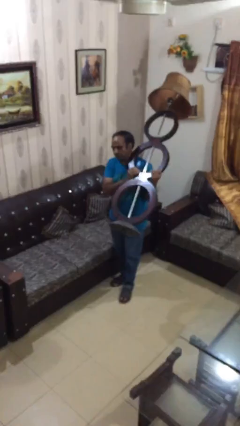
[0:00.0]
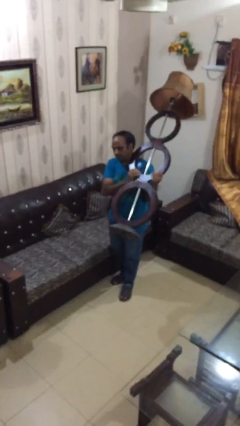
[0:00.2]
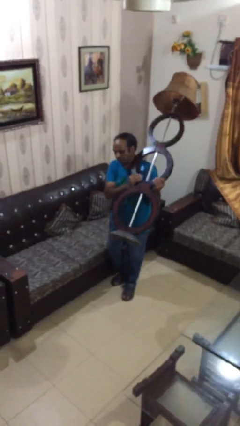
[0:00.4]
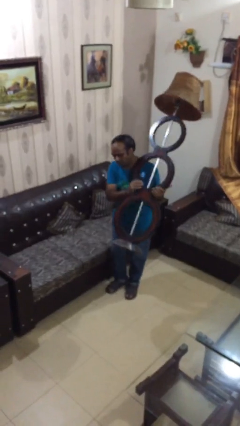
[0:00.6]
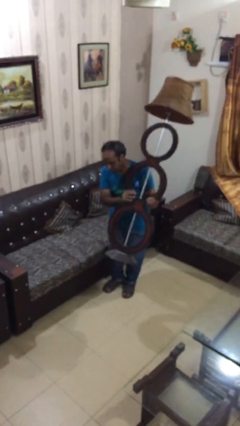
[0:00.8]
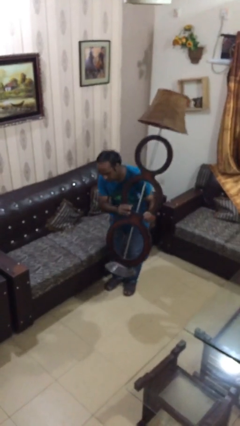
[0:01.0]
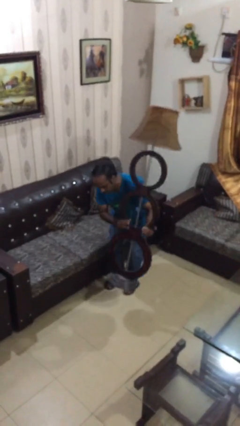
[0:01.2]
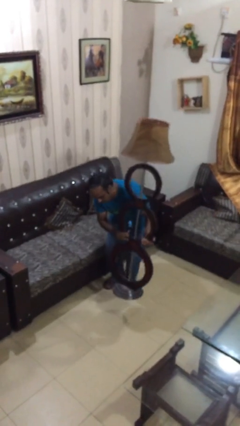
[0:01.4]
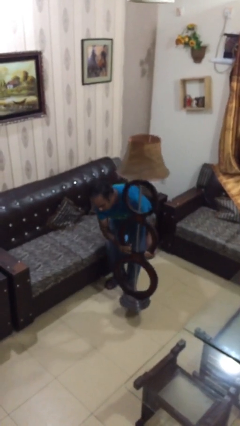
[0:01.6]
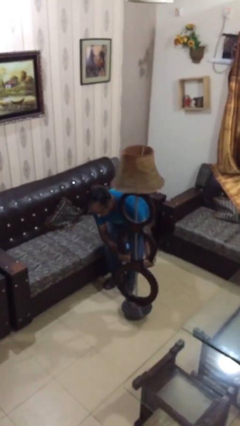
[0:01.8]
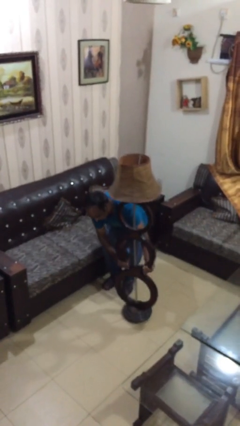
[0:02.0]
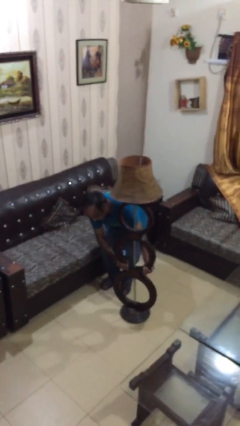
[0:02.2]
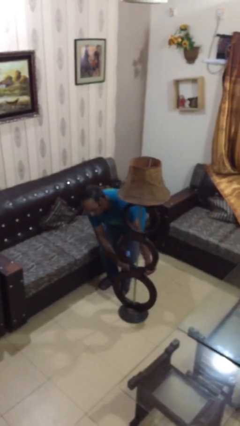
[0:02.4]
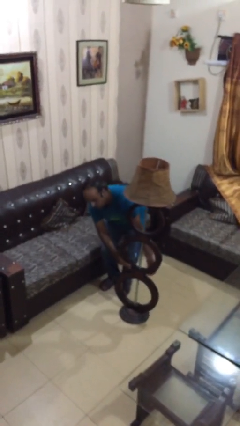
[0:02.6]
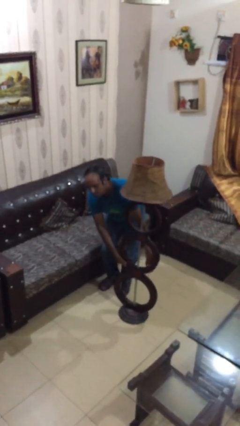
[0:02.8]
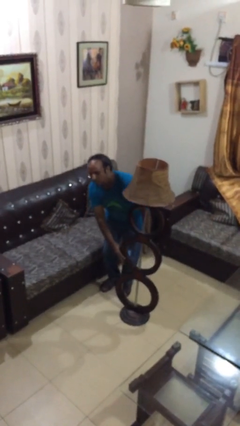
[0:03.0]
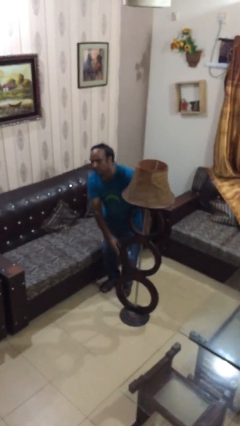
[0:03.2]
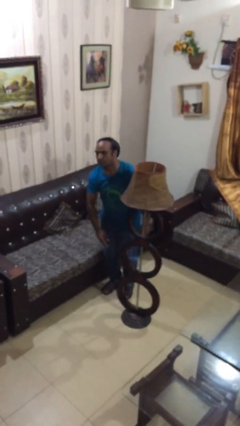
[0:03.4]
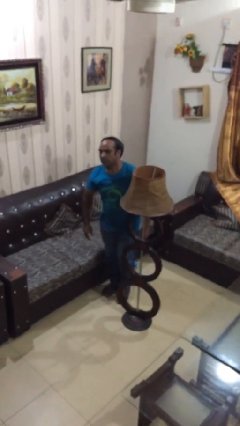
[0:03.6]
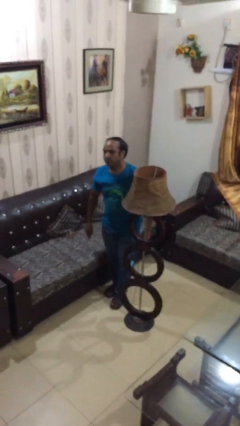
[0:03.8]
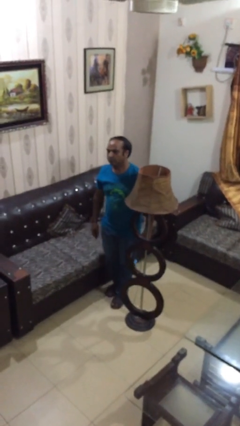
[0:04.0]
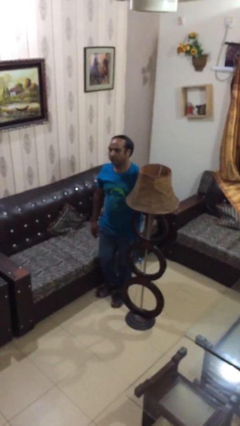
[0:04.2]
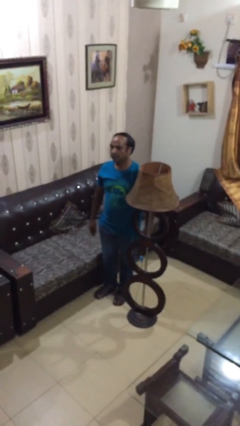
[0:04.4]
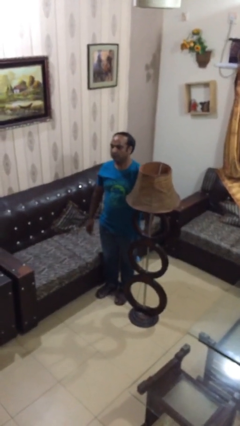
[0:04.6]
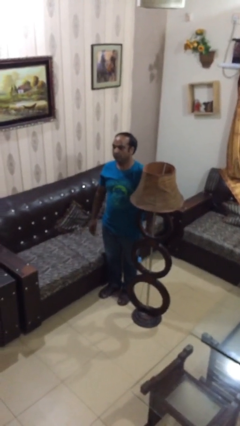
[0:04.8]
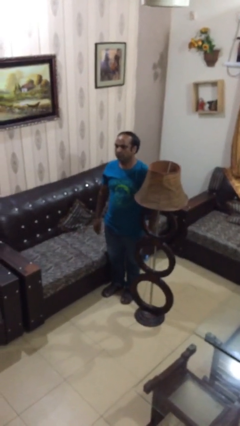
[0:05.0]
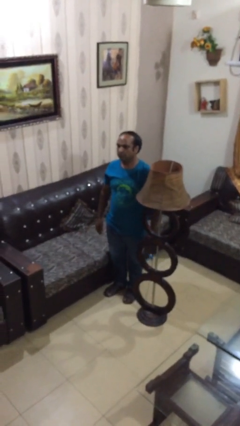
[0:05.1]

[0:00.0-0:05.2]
person puts down object on floor

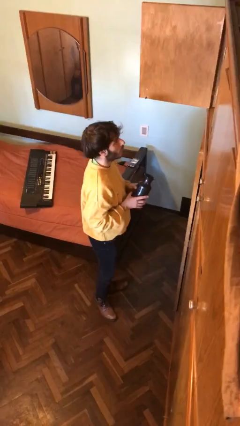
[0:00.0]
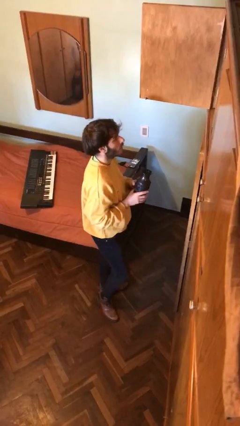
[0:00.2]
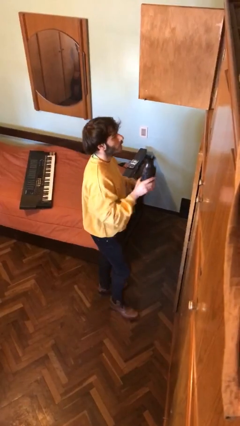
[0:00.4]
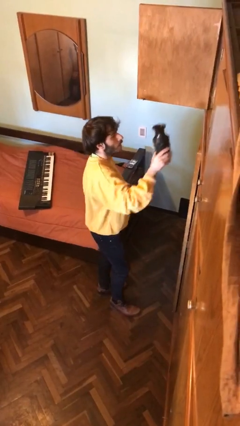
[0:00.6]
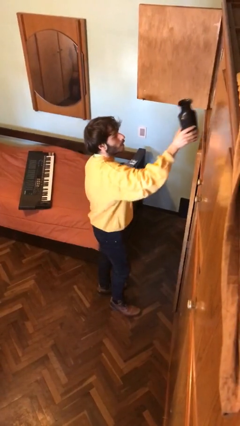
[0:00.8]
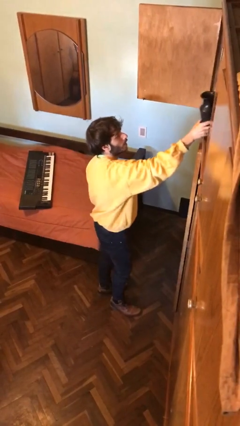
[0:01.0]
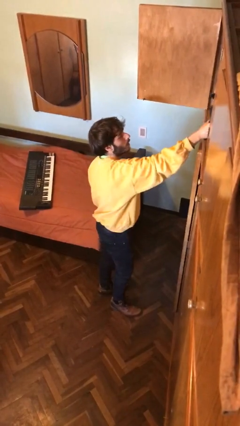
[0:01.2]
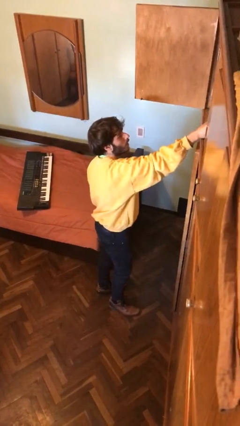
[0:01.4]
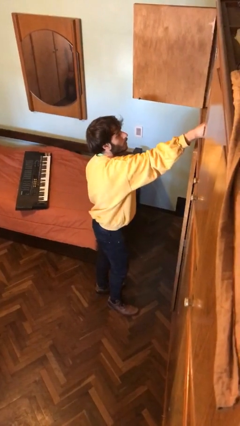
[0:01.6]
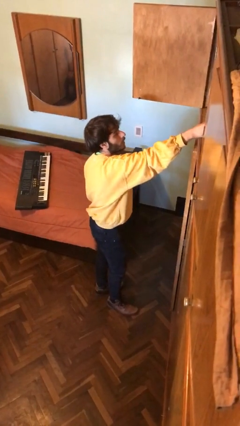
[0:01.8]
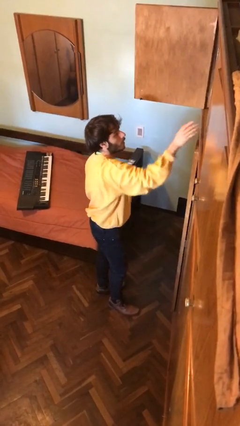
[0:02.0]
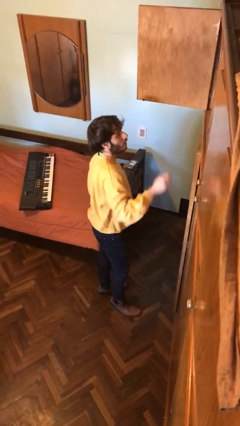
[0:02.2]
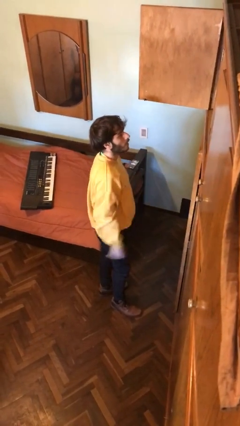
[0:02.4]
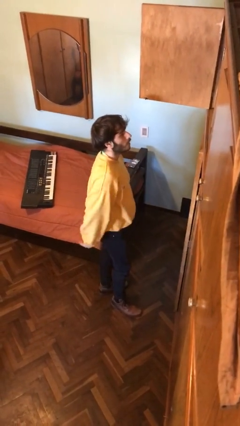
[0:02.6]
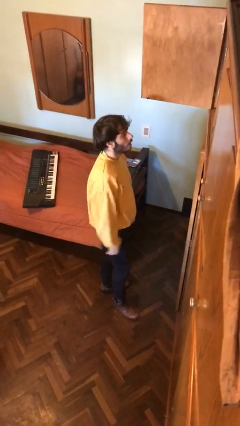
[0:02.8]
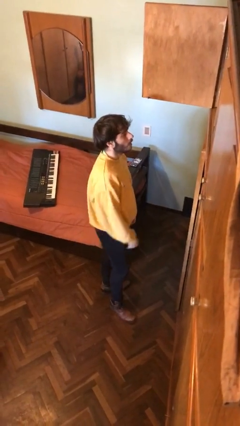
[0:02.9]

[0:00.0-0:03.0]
person puts down object into cabinet

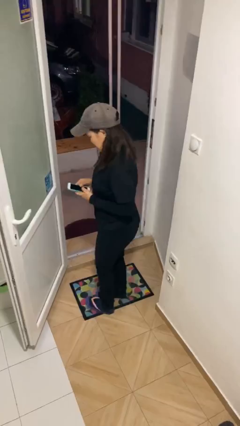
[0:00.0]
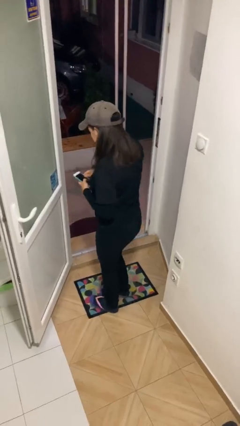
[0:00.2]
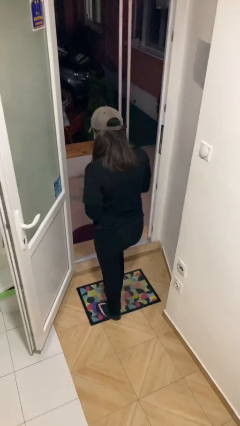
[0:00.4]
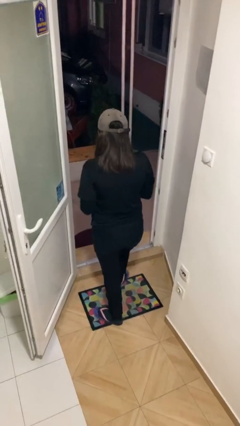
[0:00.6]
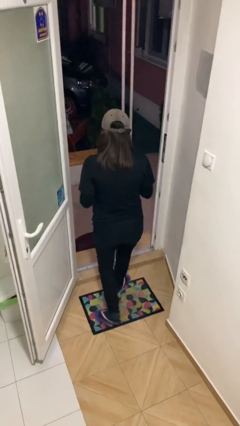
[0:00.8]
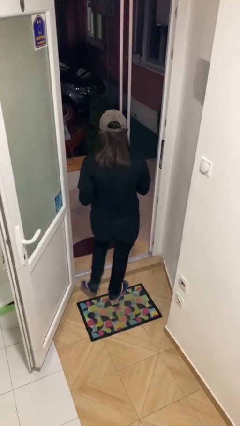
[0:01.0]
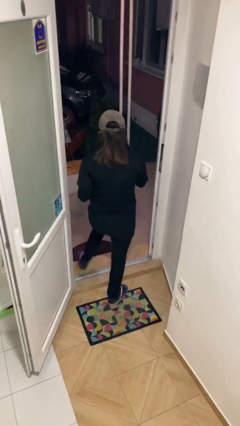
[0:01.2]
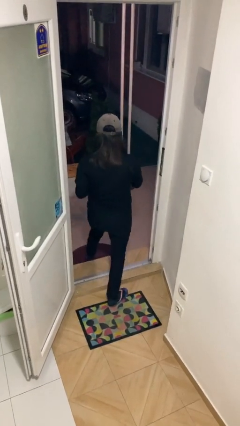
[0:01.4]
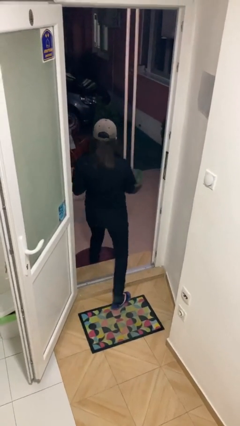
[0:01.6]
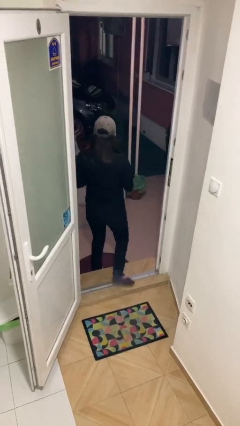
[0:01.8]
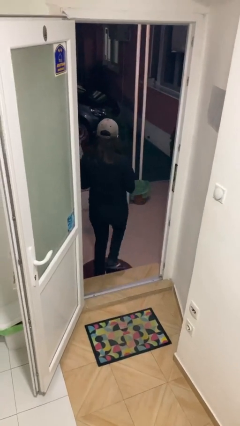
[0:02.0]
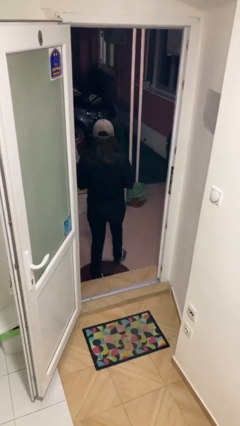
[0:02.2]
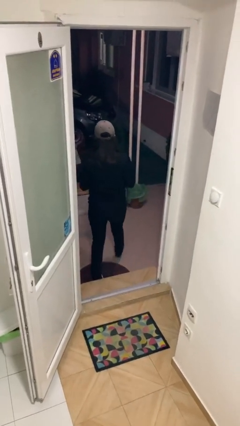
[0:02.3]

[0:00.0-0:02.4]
person exits scene through structure

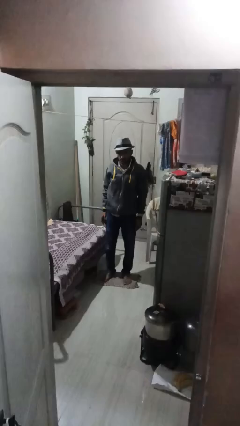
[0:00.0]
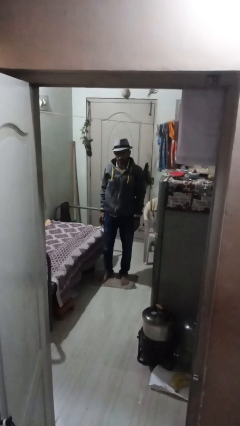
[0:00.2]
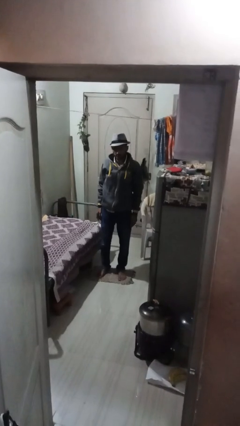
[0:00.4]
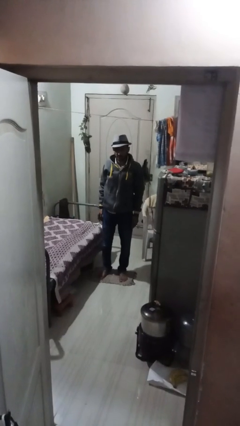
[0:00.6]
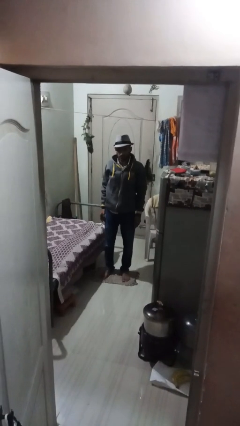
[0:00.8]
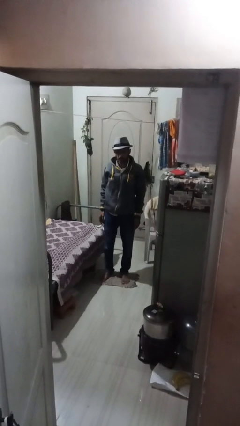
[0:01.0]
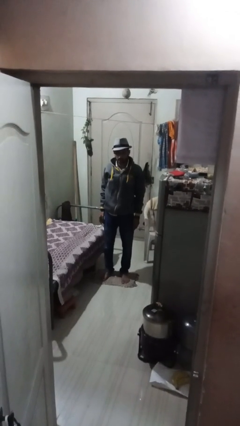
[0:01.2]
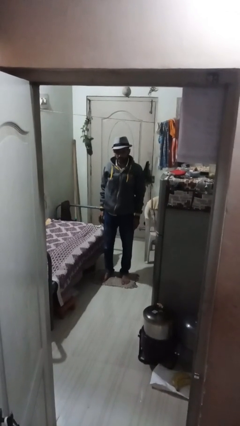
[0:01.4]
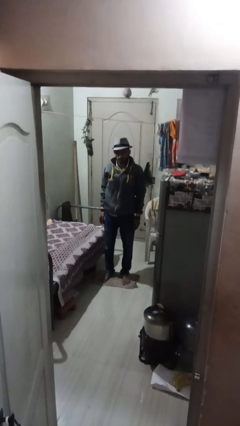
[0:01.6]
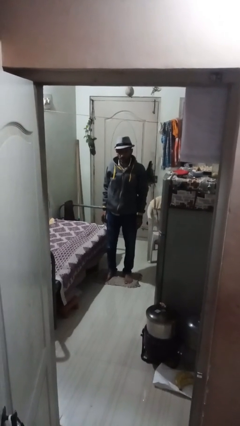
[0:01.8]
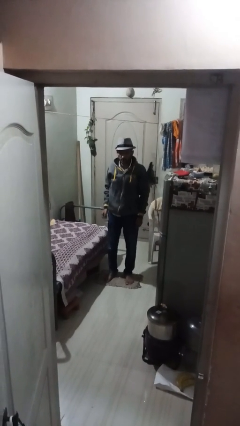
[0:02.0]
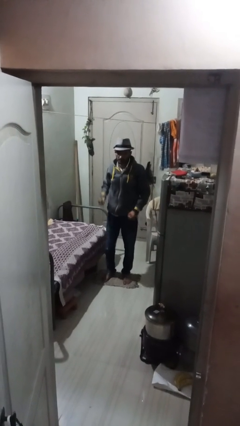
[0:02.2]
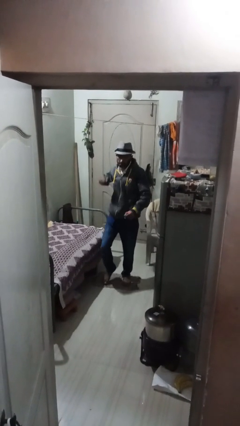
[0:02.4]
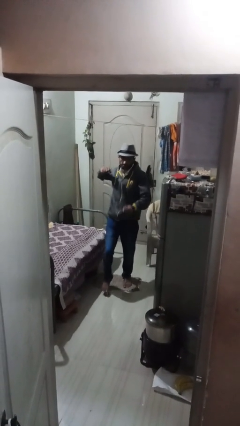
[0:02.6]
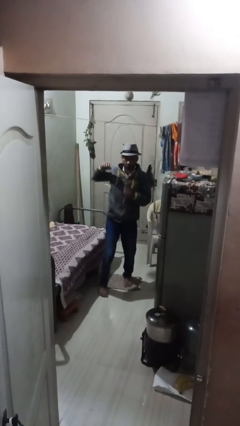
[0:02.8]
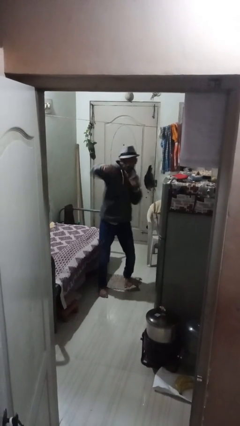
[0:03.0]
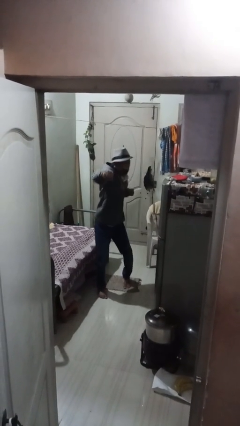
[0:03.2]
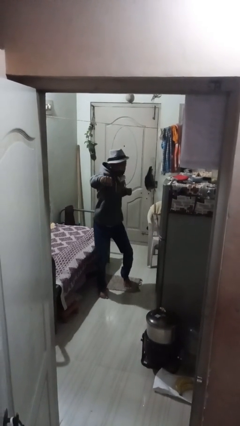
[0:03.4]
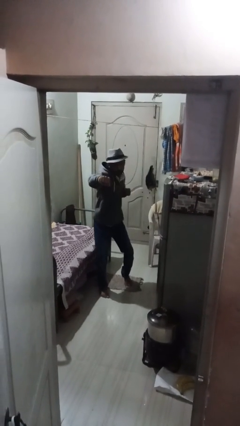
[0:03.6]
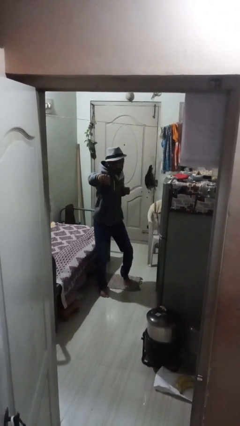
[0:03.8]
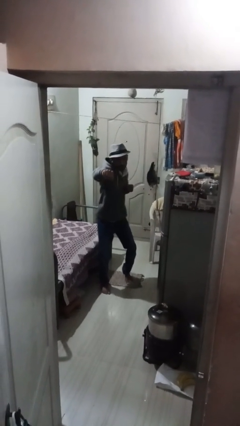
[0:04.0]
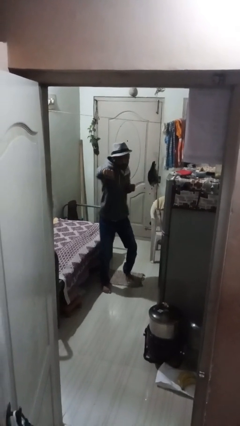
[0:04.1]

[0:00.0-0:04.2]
person punches

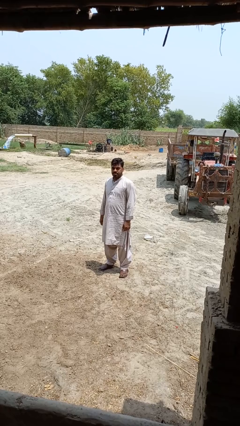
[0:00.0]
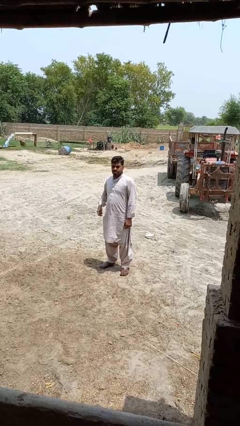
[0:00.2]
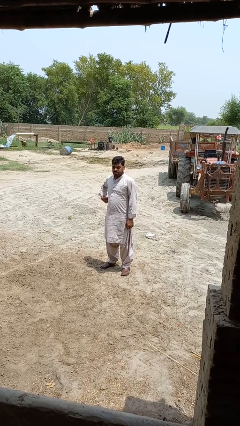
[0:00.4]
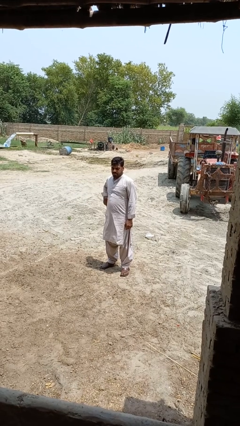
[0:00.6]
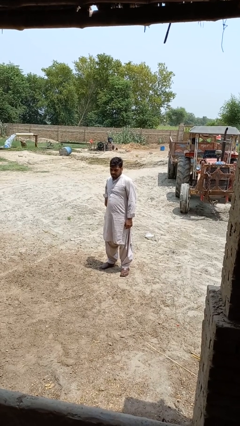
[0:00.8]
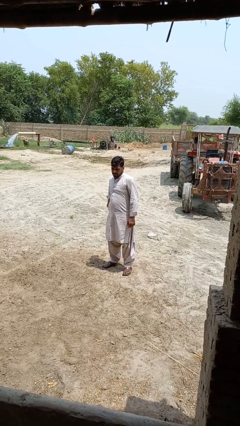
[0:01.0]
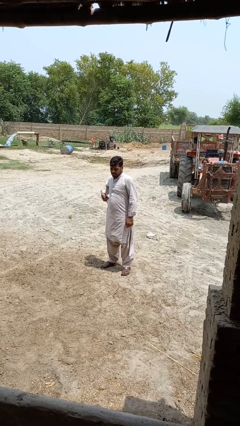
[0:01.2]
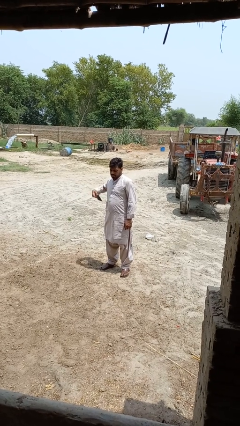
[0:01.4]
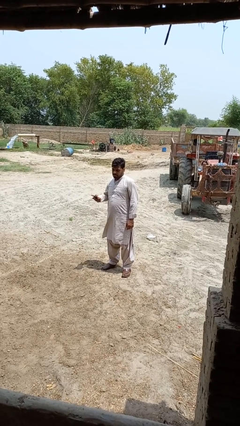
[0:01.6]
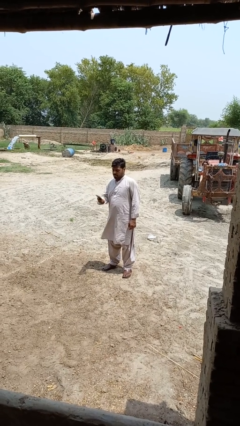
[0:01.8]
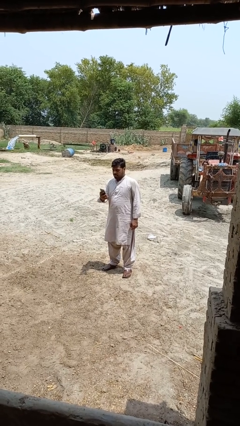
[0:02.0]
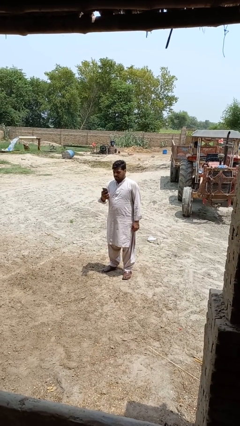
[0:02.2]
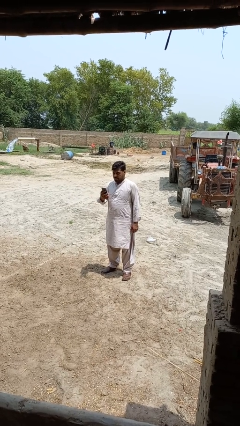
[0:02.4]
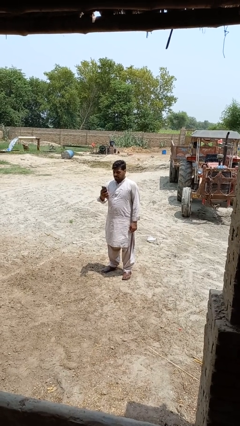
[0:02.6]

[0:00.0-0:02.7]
person takes phone from pocket
